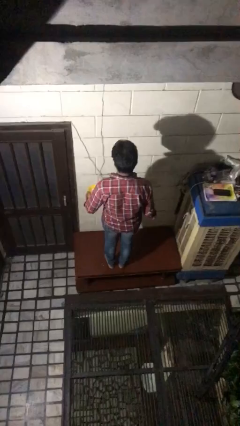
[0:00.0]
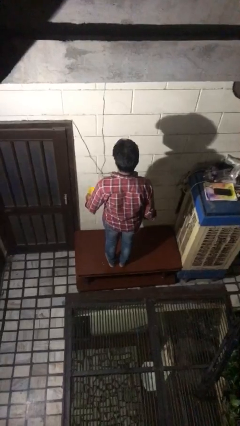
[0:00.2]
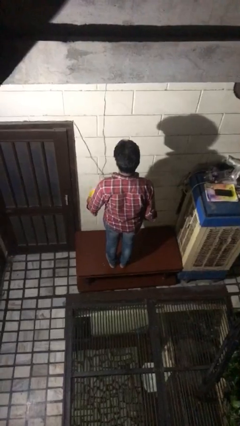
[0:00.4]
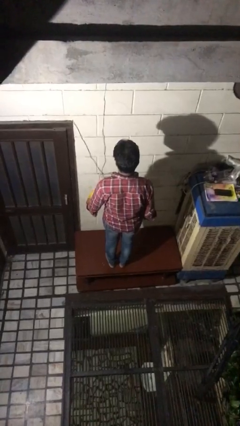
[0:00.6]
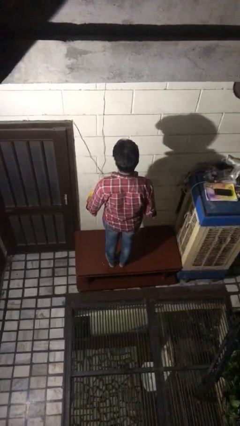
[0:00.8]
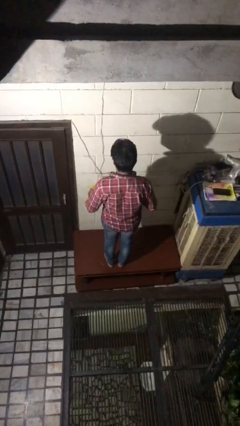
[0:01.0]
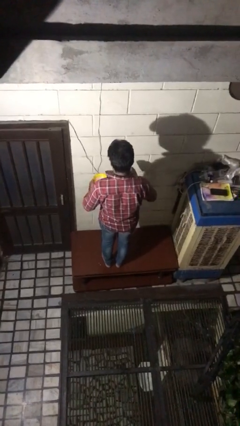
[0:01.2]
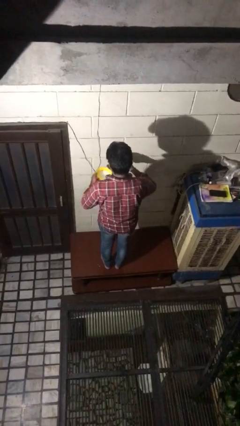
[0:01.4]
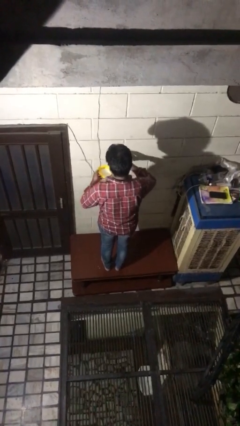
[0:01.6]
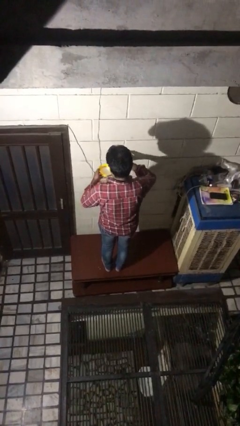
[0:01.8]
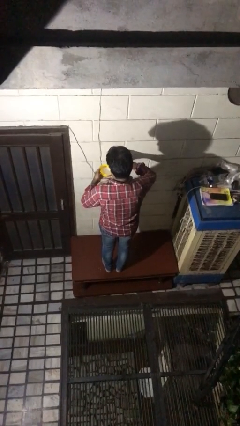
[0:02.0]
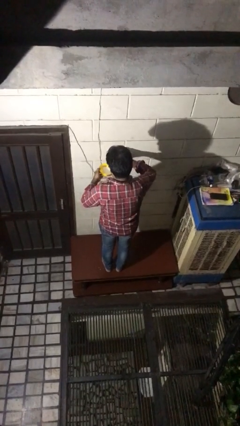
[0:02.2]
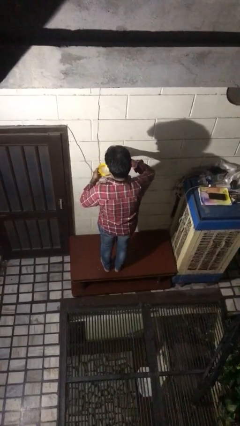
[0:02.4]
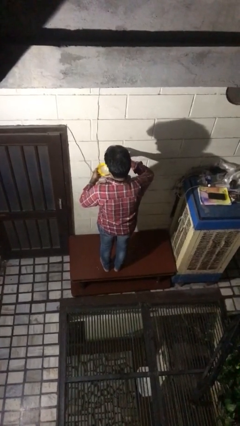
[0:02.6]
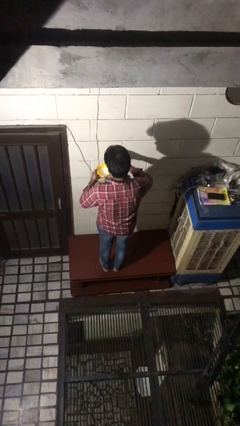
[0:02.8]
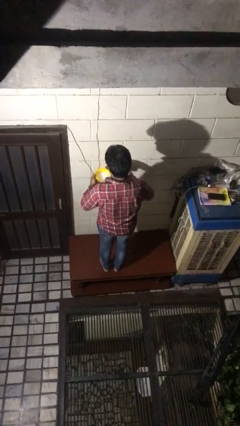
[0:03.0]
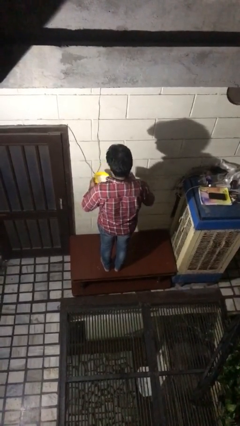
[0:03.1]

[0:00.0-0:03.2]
person pours into bowl

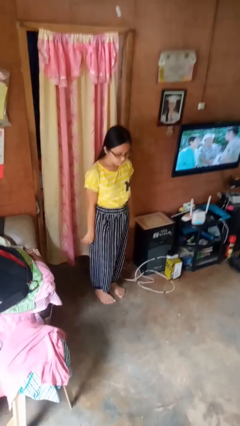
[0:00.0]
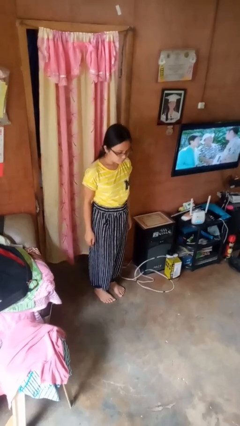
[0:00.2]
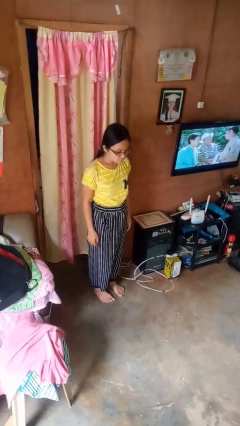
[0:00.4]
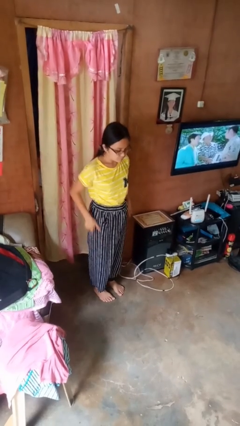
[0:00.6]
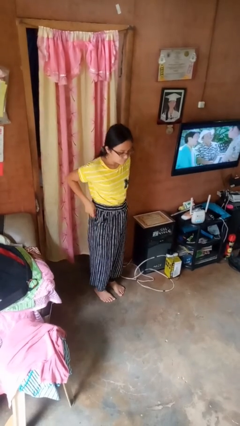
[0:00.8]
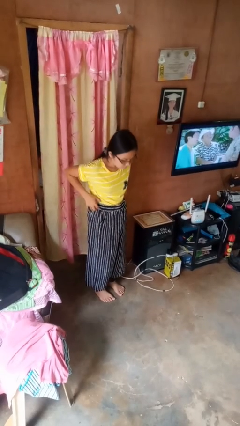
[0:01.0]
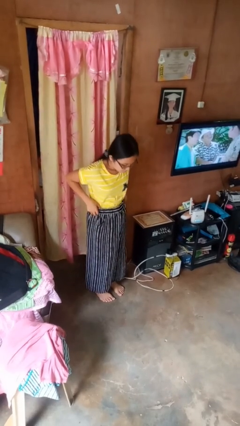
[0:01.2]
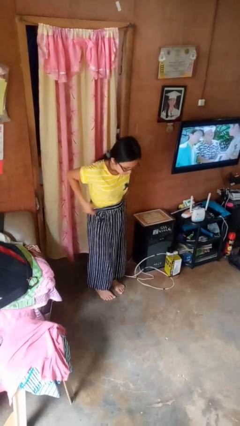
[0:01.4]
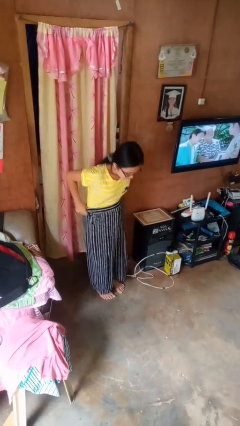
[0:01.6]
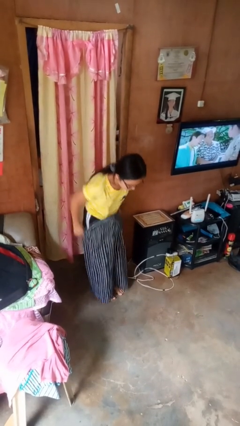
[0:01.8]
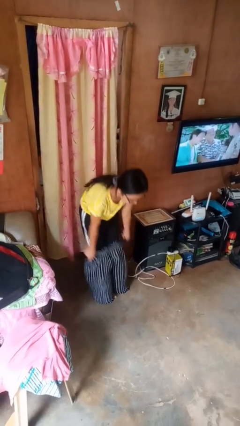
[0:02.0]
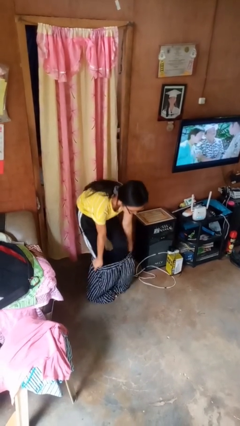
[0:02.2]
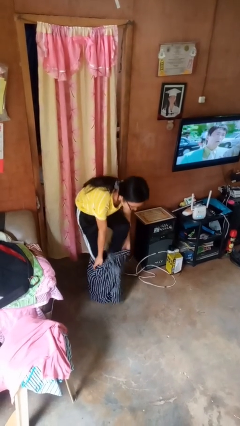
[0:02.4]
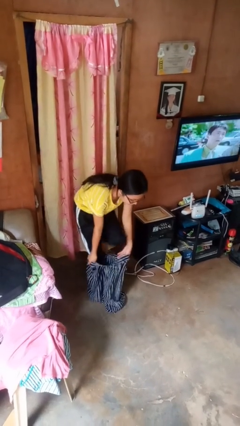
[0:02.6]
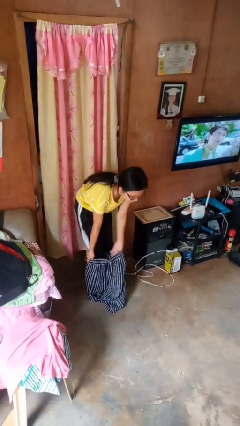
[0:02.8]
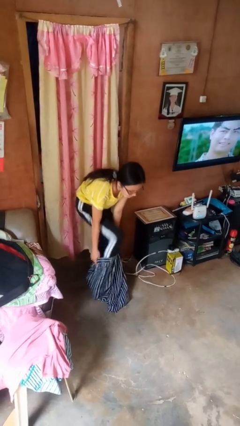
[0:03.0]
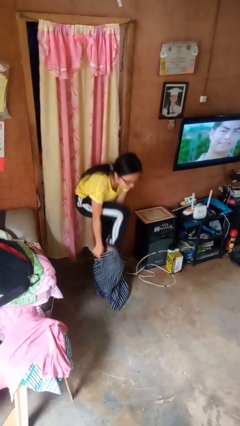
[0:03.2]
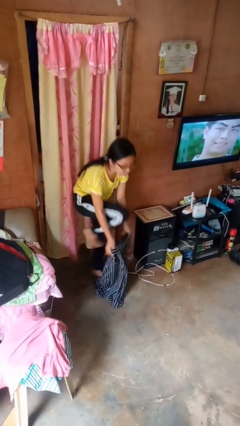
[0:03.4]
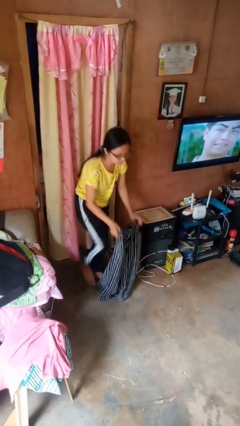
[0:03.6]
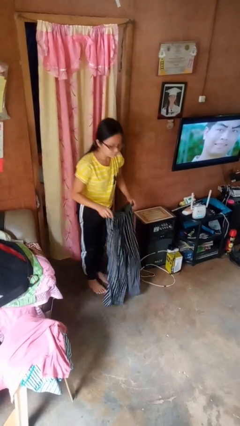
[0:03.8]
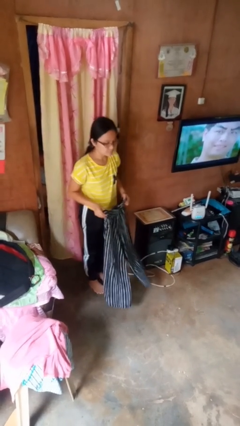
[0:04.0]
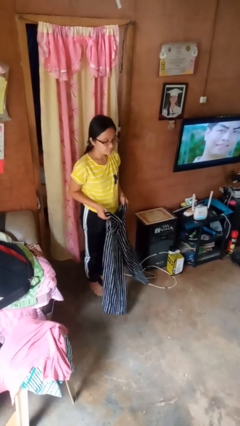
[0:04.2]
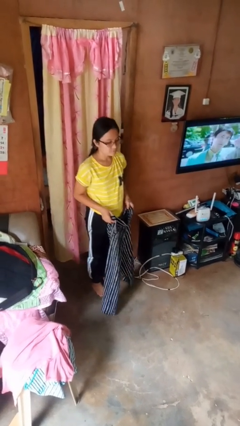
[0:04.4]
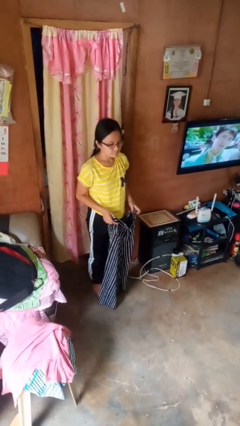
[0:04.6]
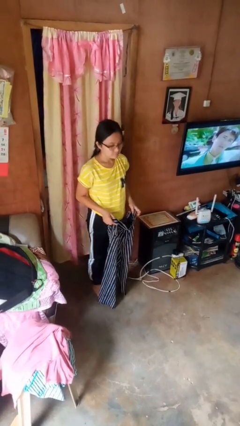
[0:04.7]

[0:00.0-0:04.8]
person takes off pants

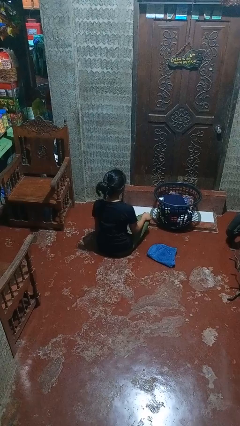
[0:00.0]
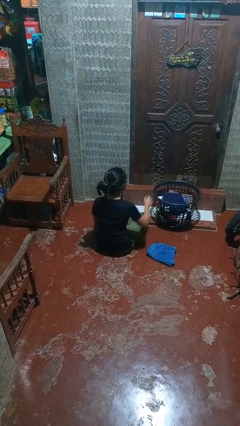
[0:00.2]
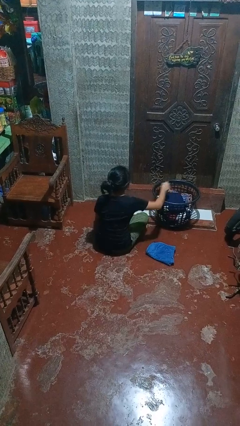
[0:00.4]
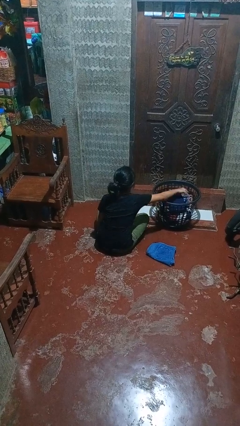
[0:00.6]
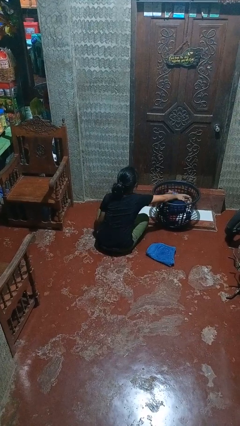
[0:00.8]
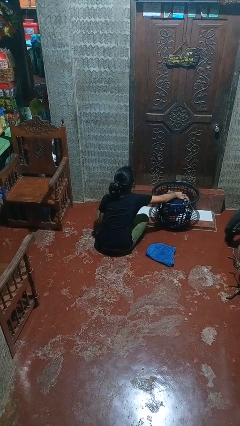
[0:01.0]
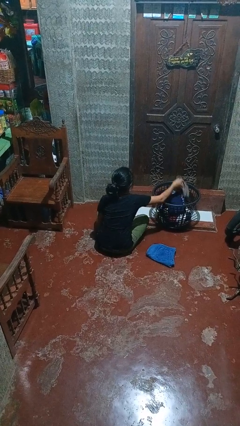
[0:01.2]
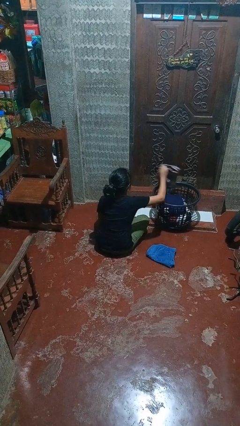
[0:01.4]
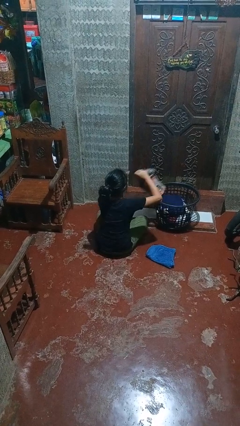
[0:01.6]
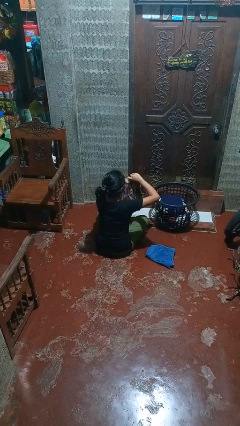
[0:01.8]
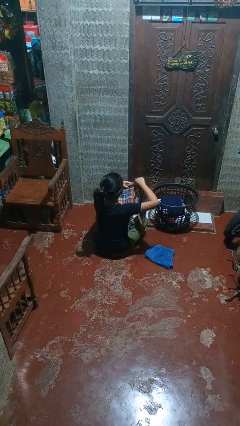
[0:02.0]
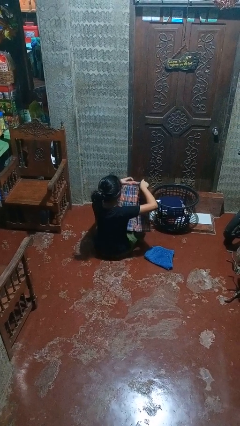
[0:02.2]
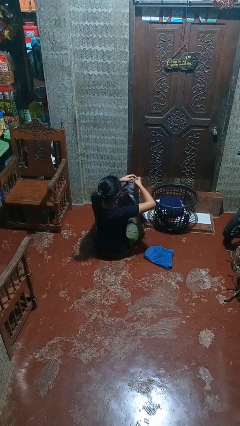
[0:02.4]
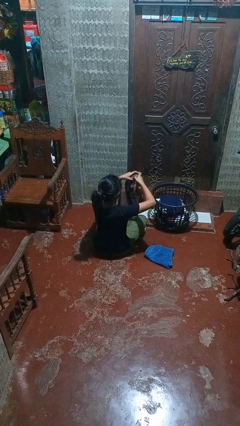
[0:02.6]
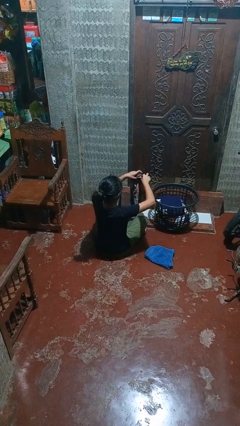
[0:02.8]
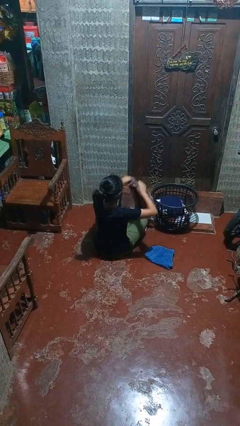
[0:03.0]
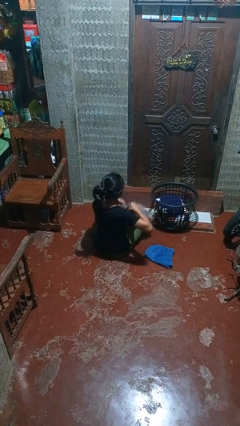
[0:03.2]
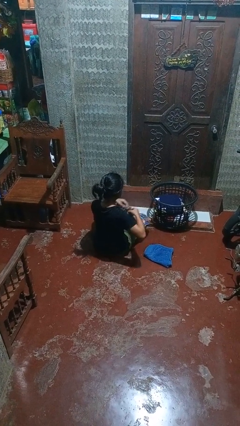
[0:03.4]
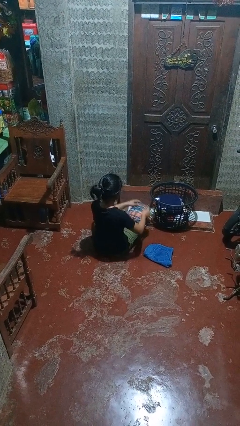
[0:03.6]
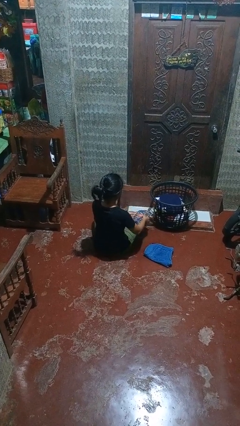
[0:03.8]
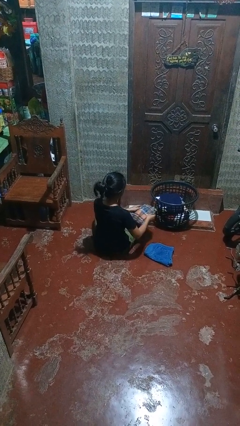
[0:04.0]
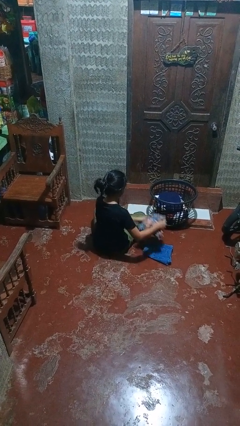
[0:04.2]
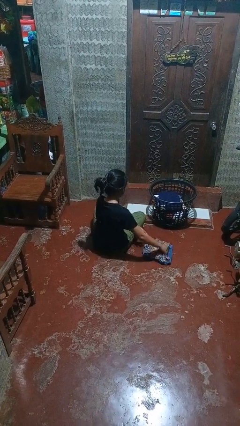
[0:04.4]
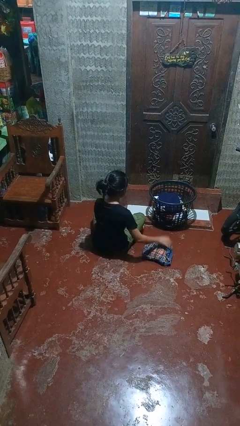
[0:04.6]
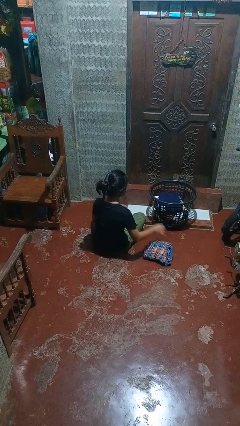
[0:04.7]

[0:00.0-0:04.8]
person folds pants

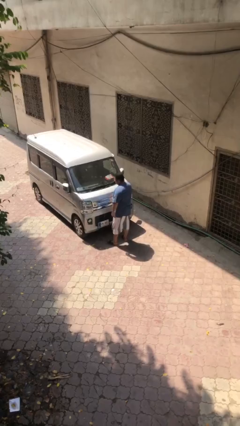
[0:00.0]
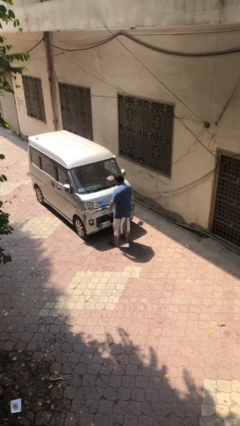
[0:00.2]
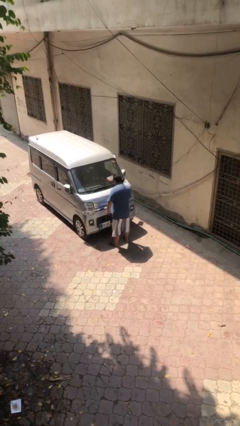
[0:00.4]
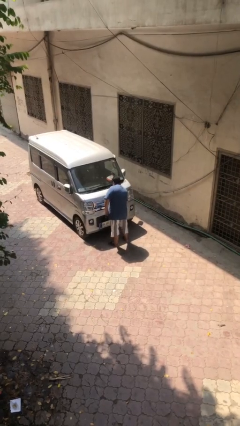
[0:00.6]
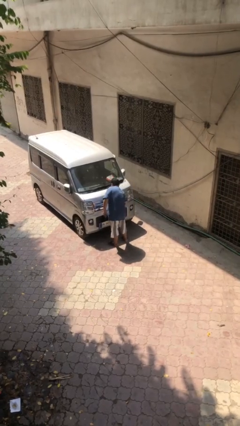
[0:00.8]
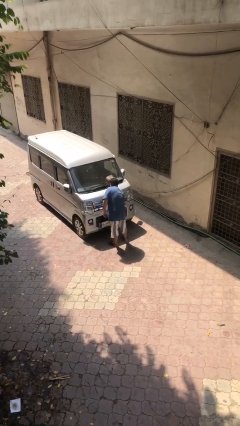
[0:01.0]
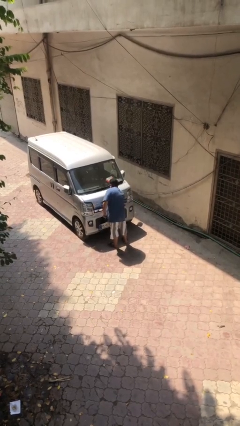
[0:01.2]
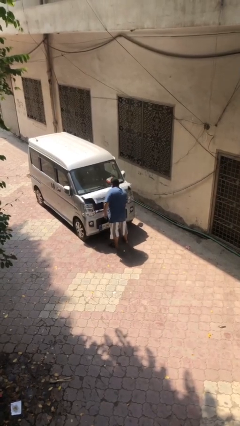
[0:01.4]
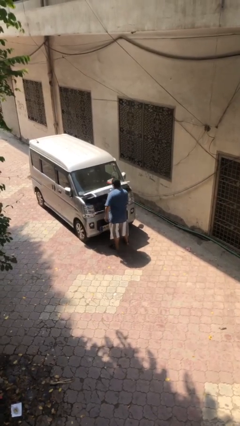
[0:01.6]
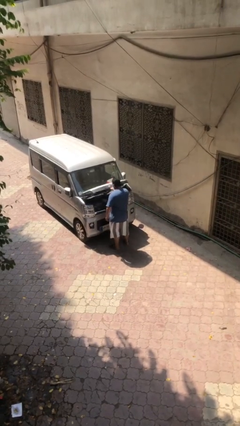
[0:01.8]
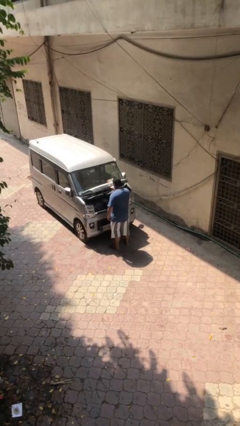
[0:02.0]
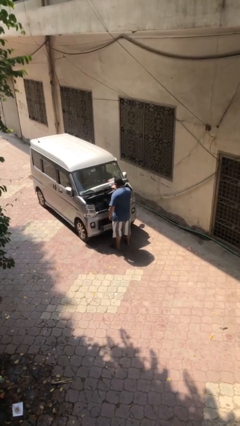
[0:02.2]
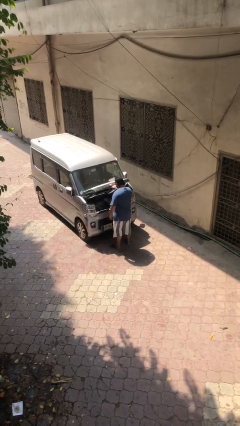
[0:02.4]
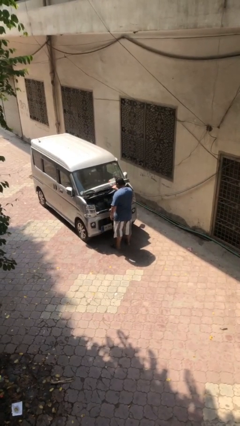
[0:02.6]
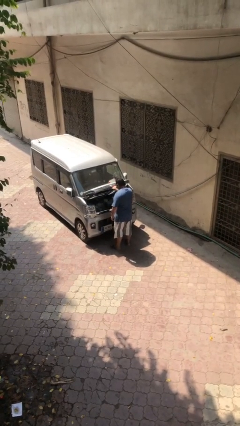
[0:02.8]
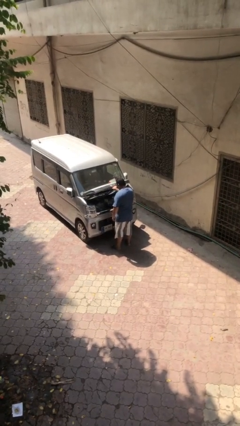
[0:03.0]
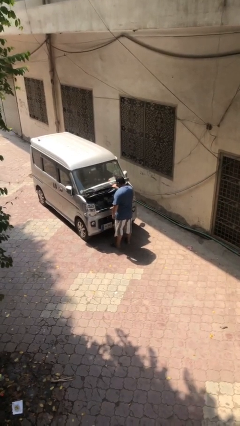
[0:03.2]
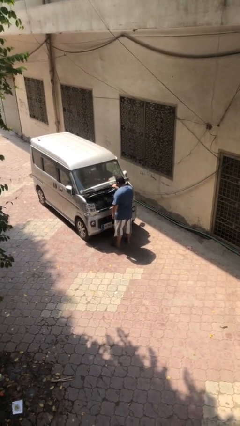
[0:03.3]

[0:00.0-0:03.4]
person opens car hood

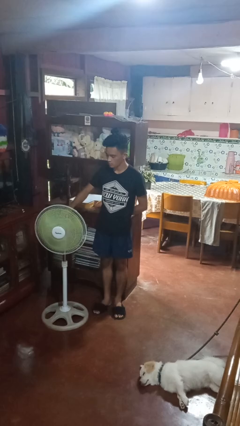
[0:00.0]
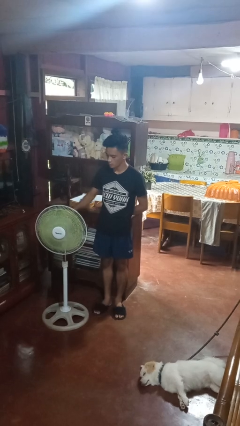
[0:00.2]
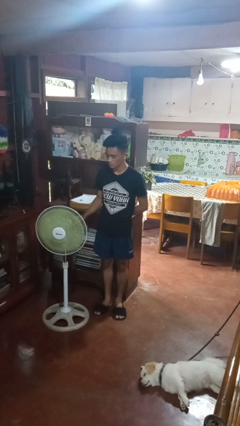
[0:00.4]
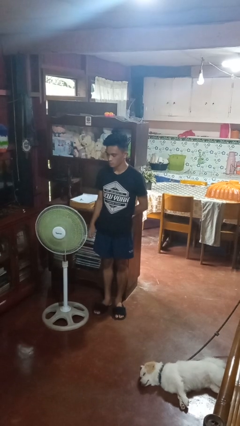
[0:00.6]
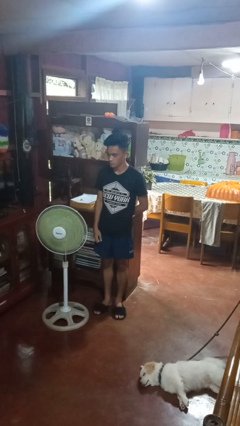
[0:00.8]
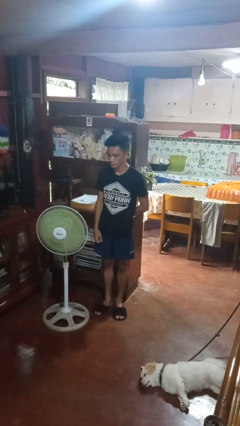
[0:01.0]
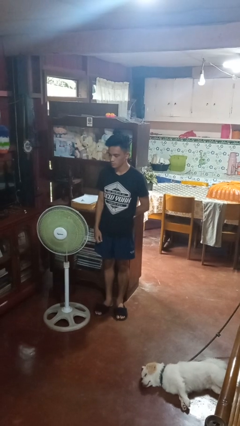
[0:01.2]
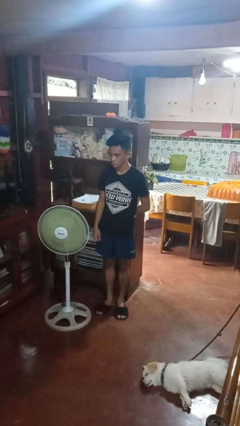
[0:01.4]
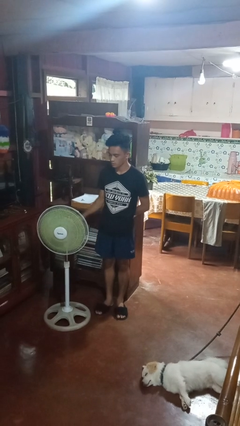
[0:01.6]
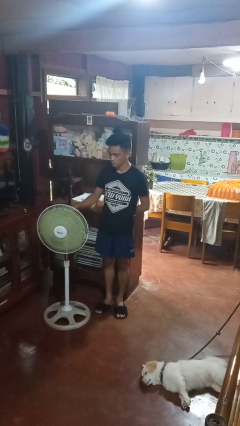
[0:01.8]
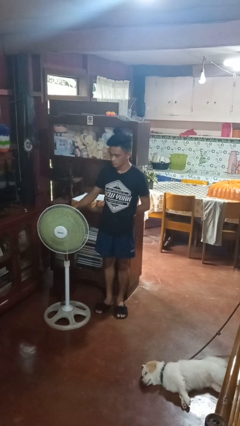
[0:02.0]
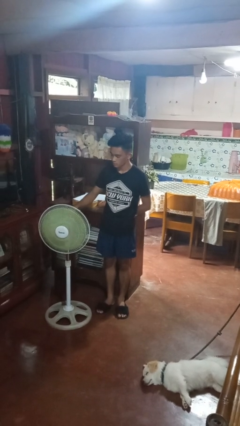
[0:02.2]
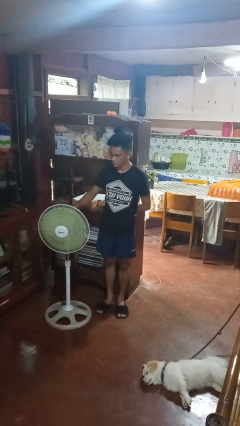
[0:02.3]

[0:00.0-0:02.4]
person turns on fan
